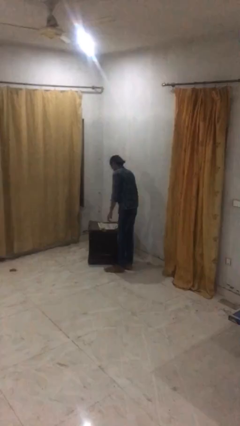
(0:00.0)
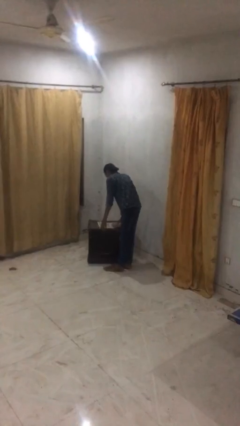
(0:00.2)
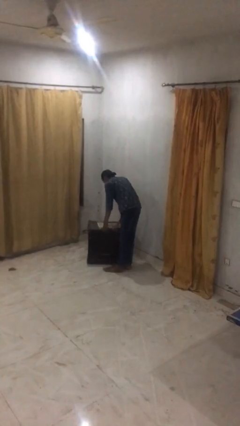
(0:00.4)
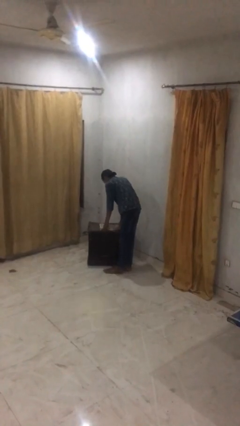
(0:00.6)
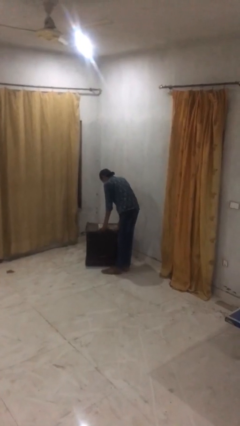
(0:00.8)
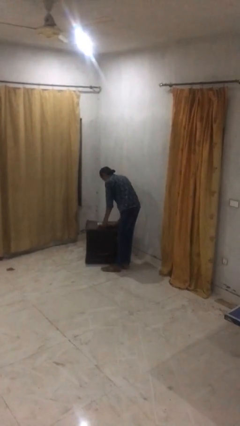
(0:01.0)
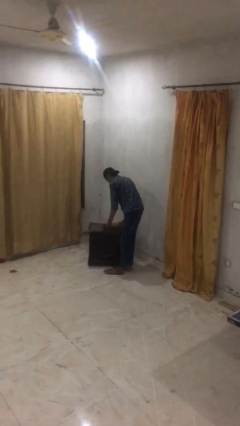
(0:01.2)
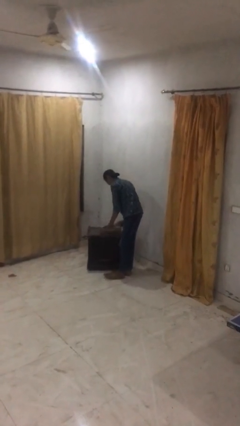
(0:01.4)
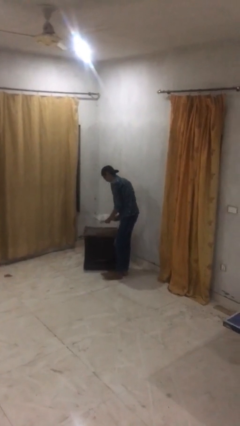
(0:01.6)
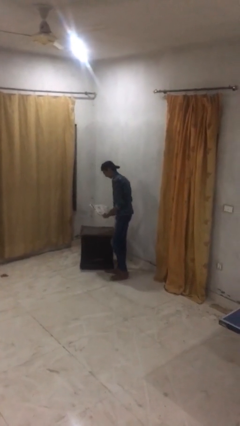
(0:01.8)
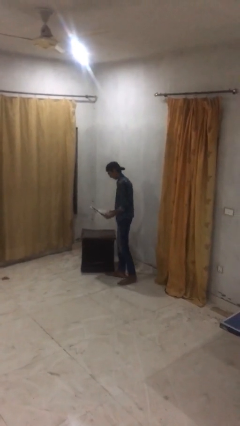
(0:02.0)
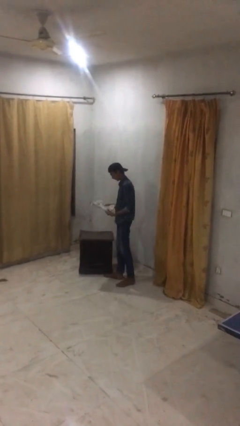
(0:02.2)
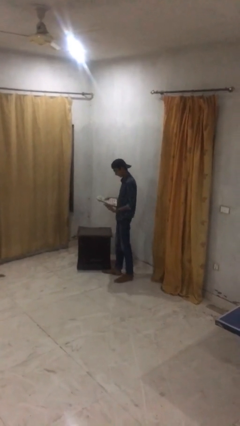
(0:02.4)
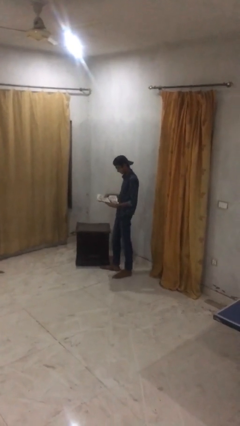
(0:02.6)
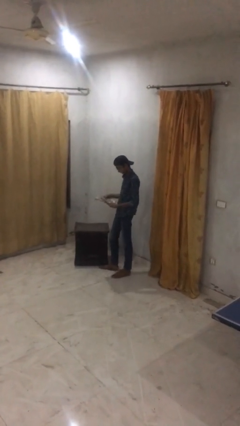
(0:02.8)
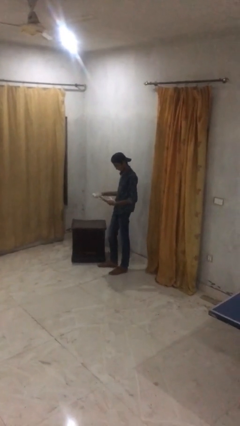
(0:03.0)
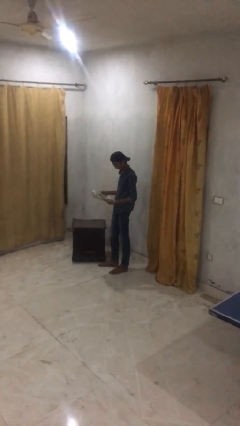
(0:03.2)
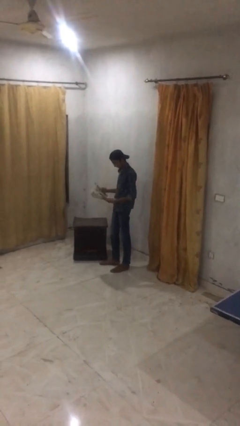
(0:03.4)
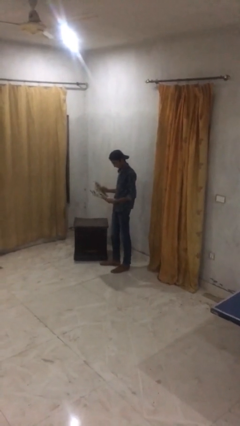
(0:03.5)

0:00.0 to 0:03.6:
person picks up object from table

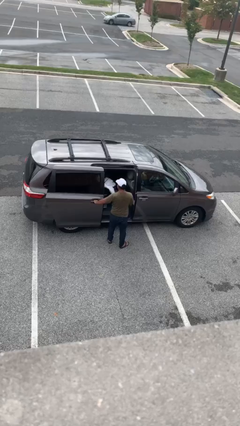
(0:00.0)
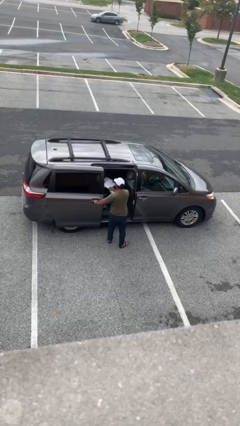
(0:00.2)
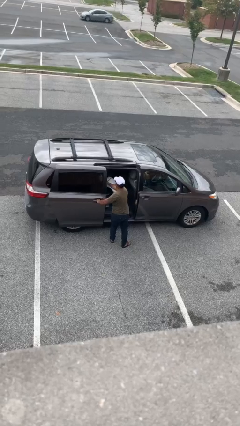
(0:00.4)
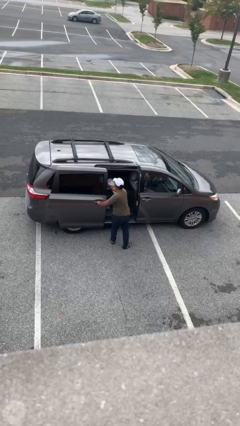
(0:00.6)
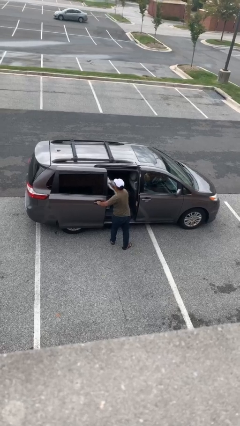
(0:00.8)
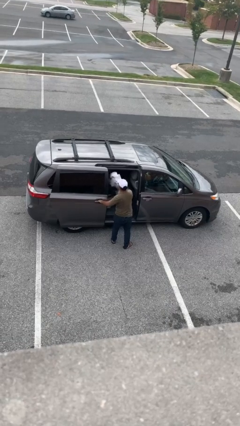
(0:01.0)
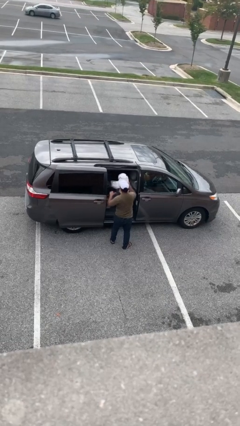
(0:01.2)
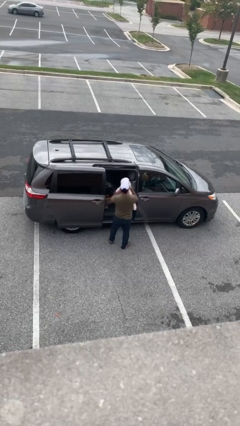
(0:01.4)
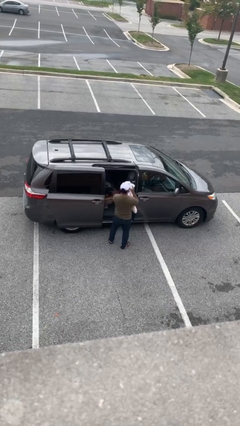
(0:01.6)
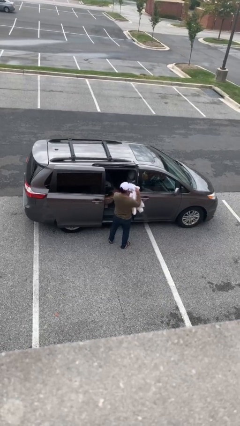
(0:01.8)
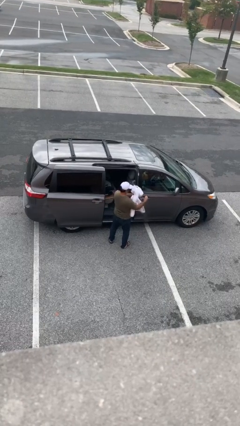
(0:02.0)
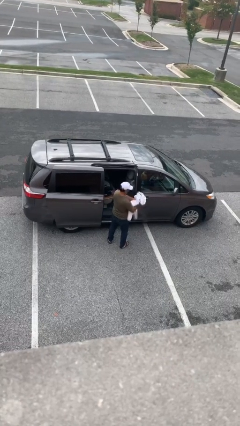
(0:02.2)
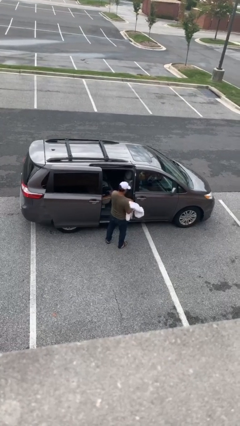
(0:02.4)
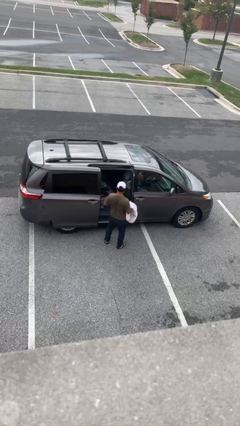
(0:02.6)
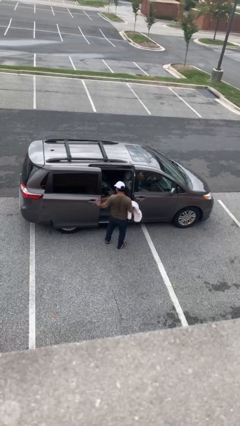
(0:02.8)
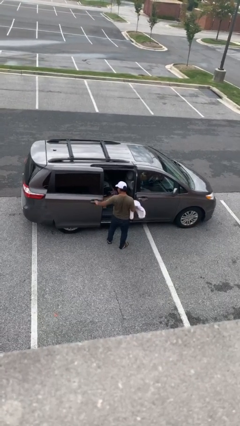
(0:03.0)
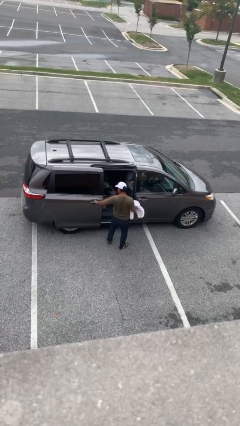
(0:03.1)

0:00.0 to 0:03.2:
person unloads car

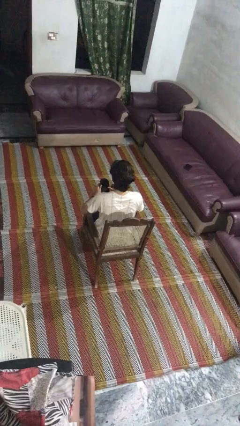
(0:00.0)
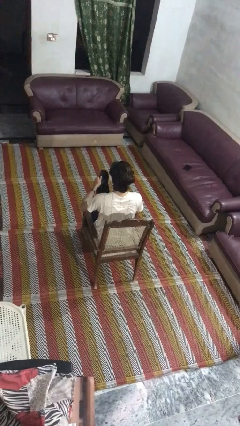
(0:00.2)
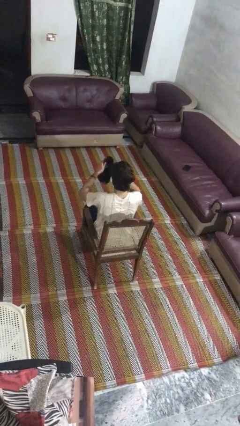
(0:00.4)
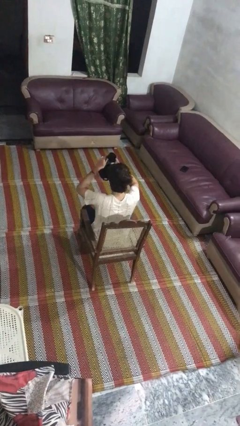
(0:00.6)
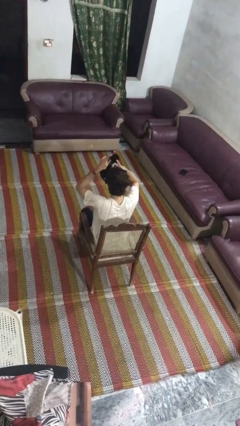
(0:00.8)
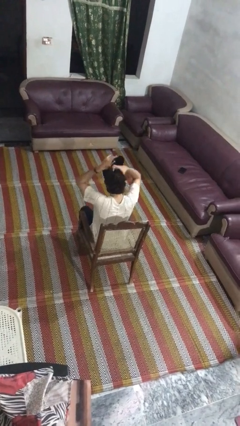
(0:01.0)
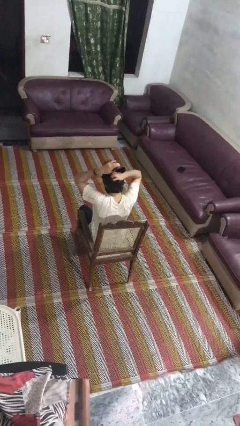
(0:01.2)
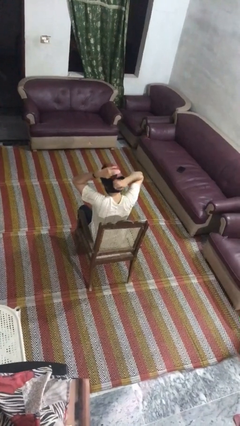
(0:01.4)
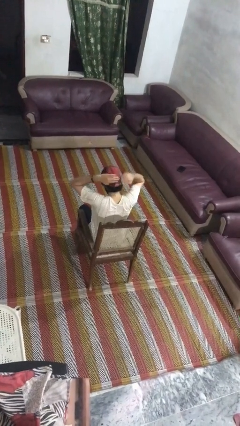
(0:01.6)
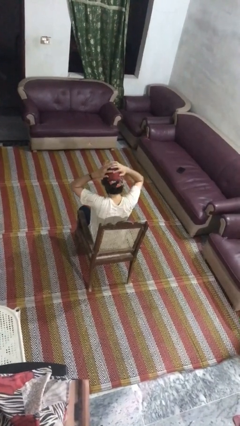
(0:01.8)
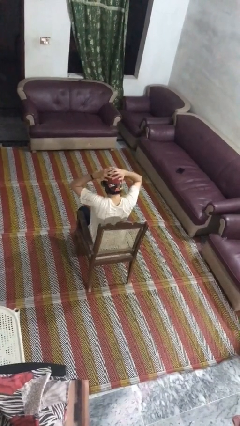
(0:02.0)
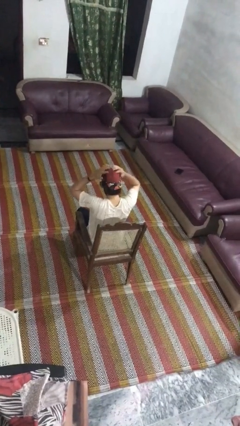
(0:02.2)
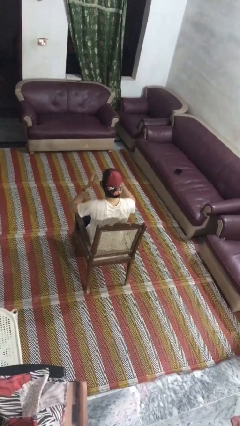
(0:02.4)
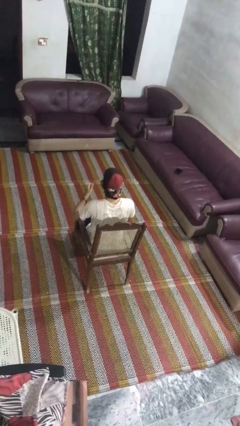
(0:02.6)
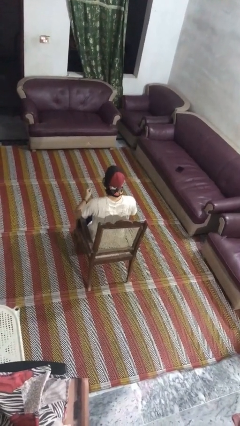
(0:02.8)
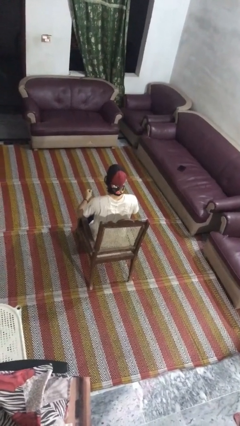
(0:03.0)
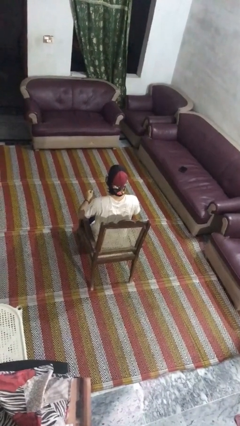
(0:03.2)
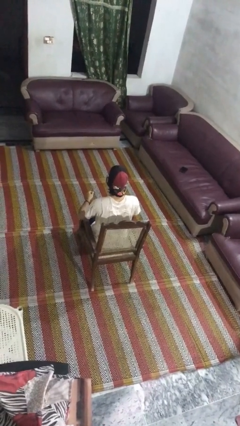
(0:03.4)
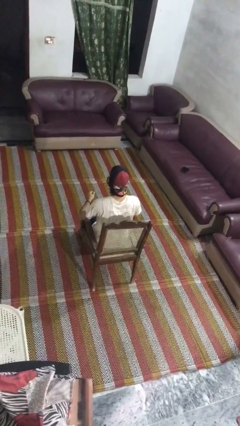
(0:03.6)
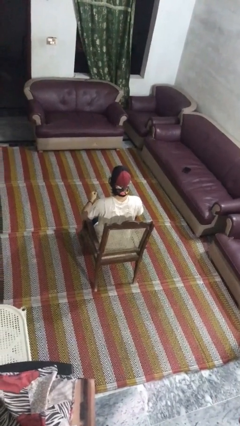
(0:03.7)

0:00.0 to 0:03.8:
person puts on hat

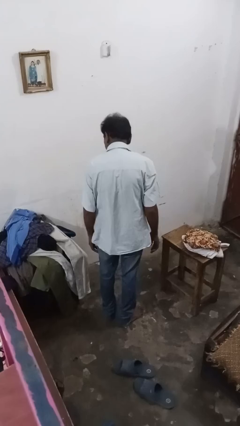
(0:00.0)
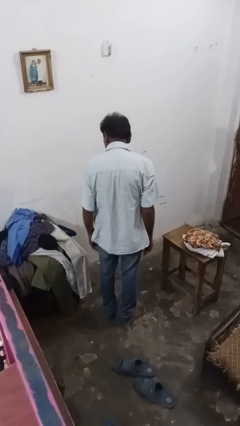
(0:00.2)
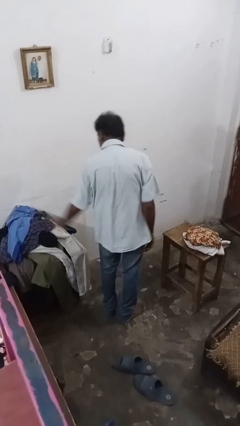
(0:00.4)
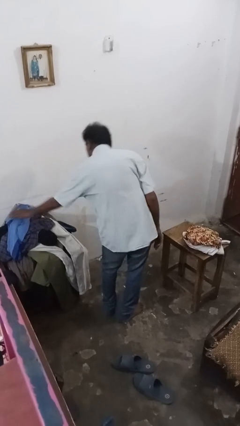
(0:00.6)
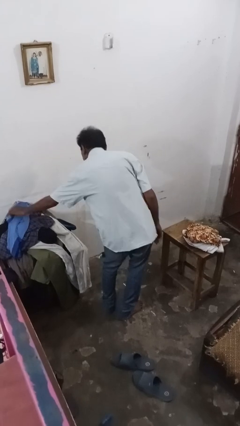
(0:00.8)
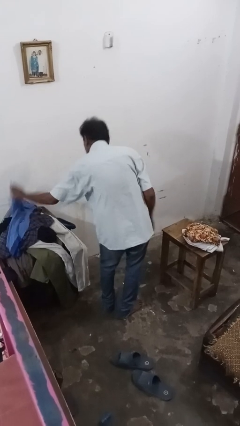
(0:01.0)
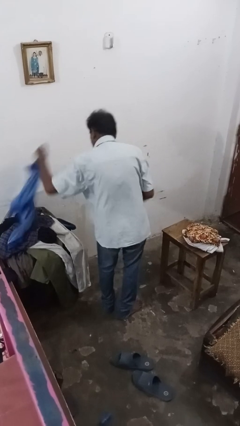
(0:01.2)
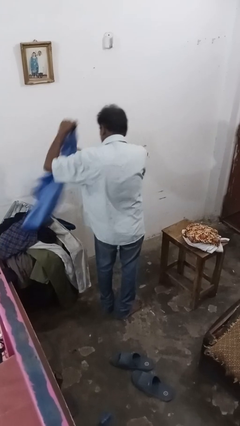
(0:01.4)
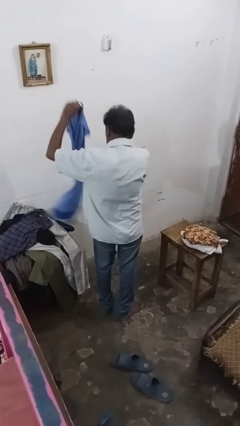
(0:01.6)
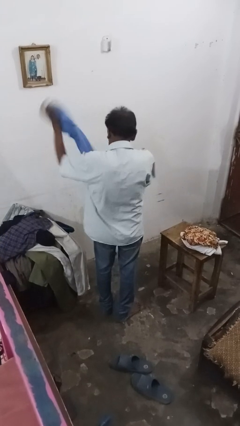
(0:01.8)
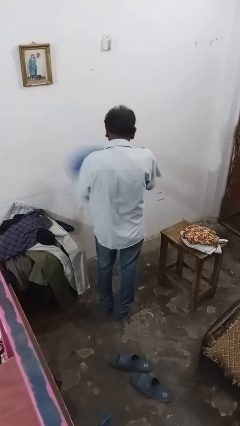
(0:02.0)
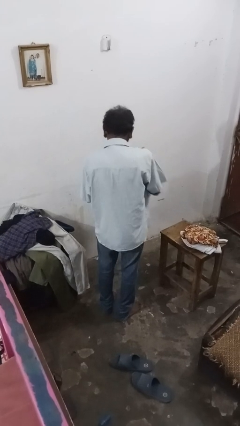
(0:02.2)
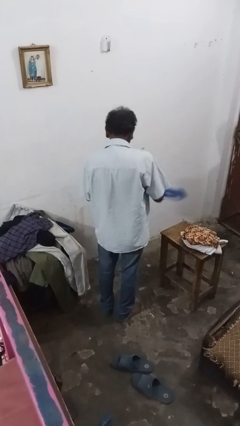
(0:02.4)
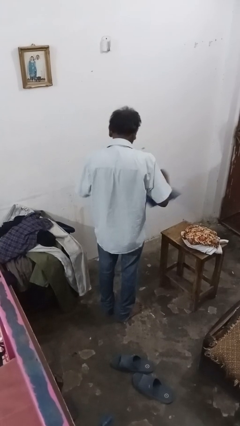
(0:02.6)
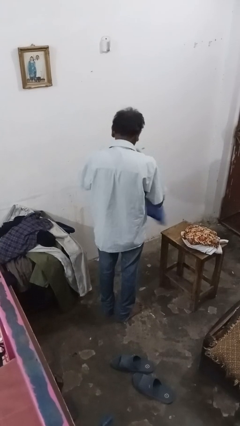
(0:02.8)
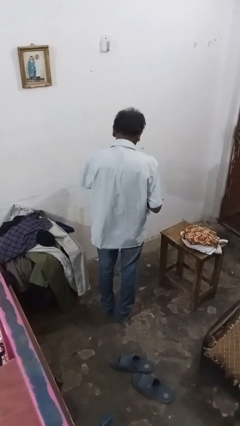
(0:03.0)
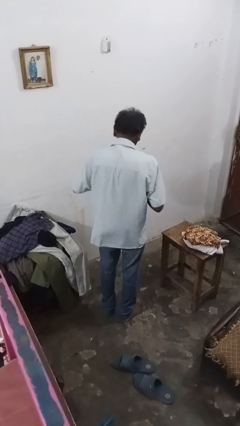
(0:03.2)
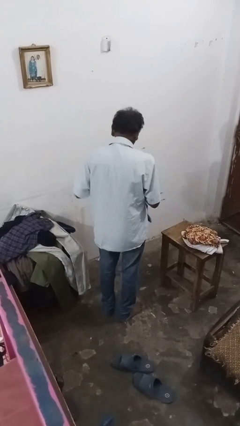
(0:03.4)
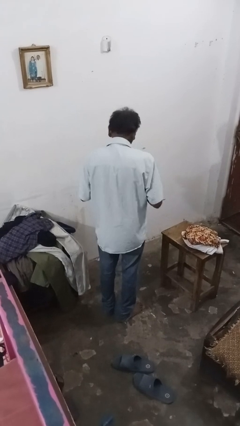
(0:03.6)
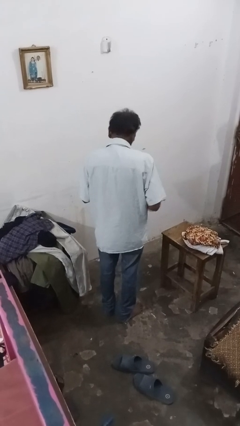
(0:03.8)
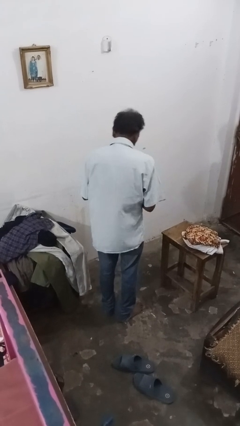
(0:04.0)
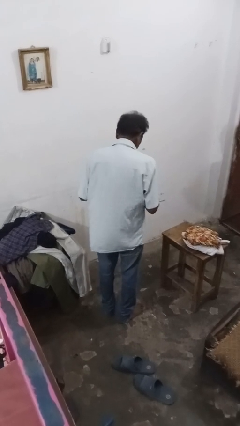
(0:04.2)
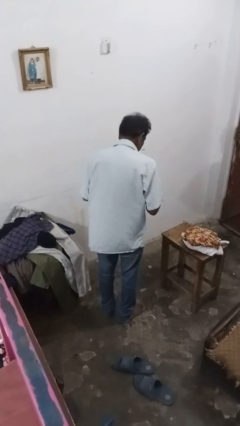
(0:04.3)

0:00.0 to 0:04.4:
person folds shirt

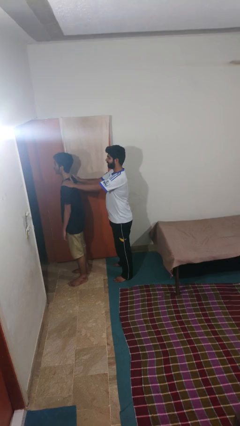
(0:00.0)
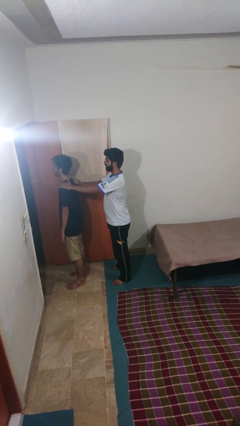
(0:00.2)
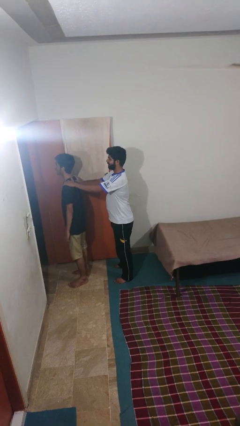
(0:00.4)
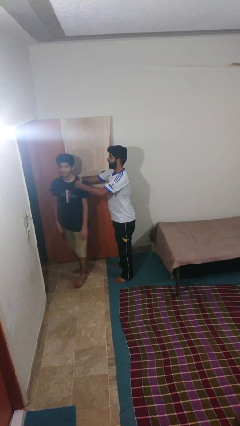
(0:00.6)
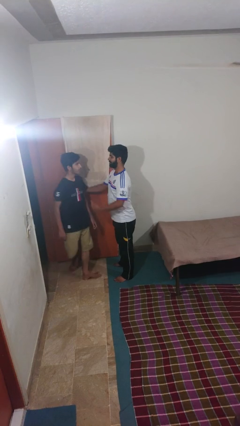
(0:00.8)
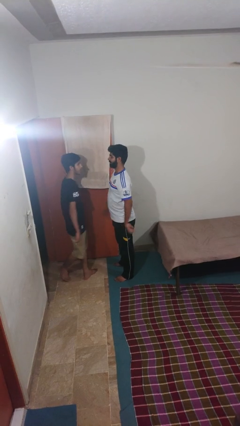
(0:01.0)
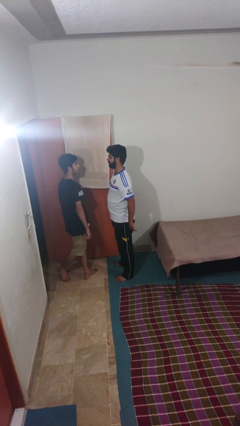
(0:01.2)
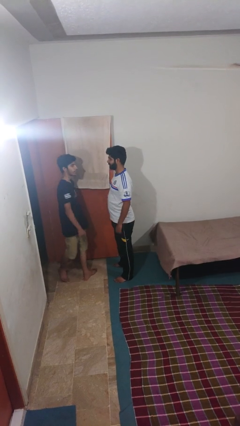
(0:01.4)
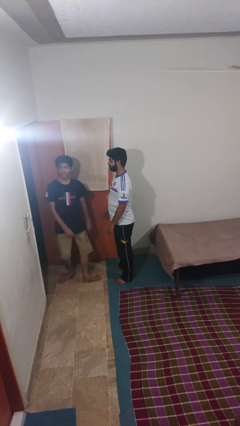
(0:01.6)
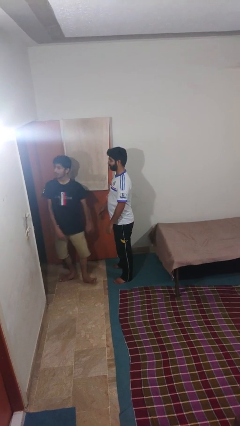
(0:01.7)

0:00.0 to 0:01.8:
person spins person around

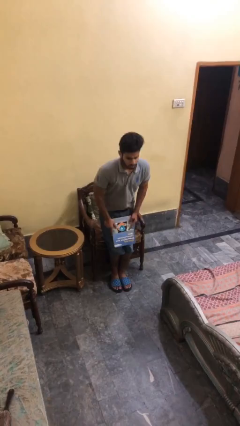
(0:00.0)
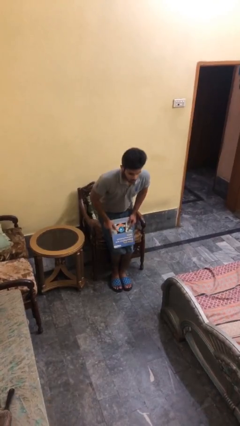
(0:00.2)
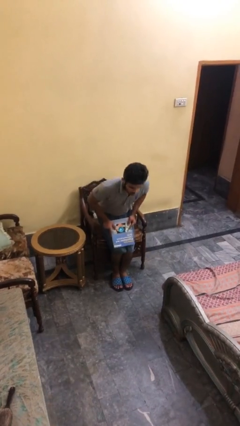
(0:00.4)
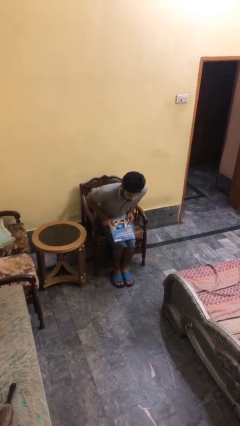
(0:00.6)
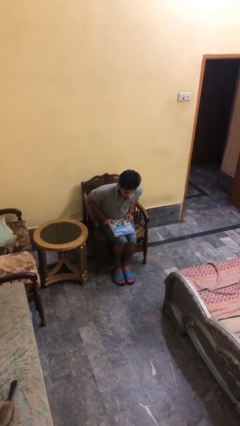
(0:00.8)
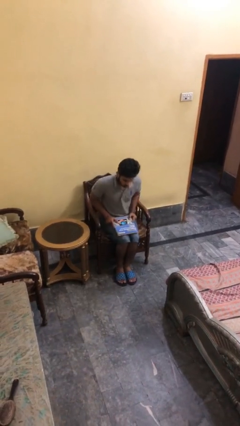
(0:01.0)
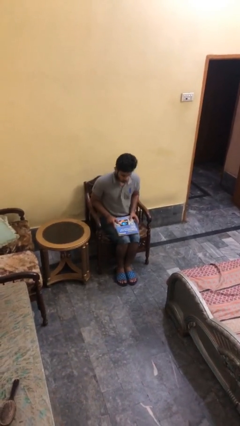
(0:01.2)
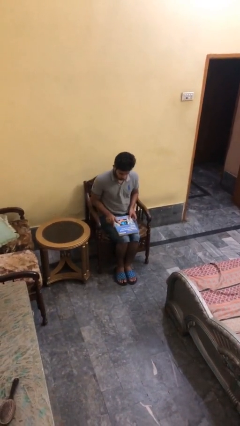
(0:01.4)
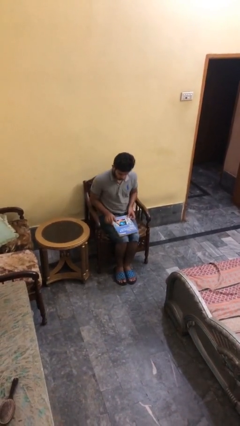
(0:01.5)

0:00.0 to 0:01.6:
person sits down
